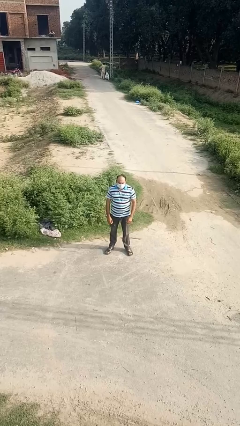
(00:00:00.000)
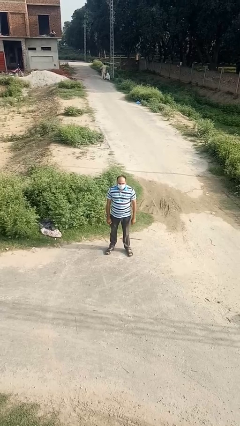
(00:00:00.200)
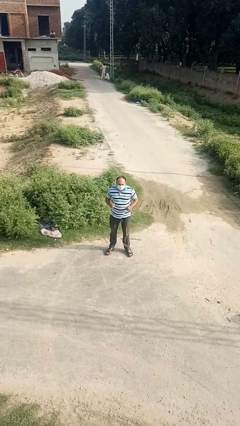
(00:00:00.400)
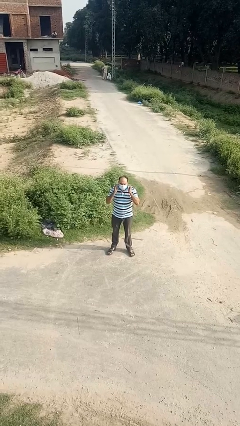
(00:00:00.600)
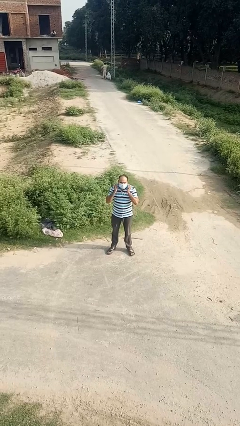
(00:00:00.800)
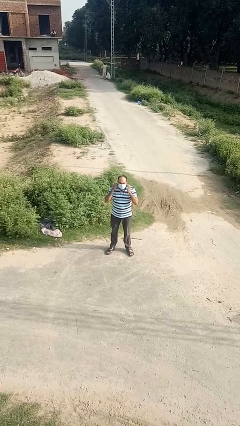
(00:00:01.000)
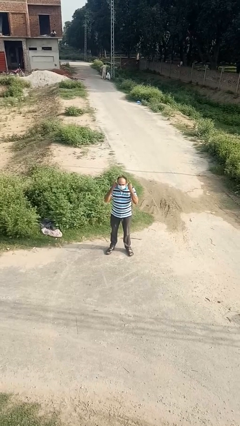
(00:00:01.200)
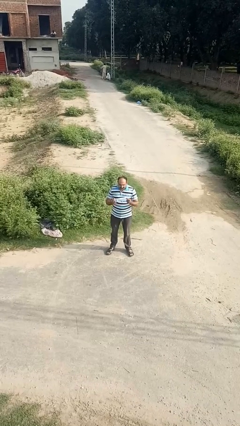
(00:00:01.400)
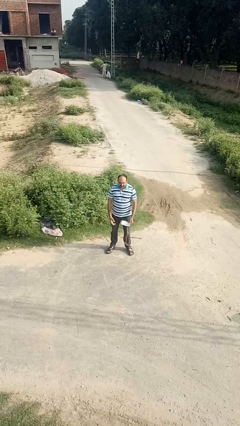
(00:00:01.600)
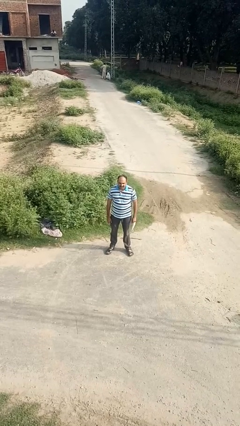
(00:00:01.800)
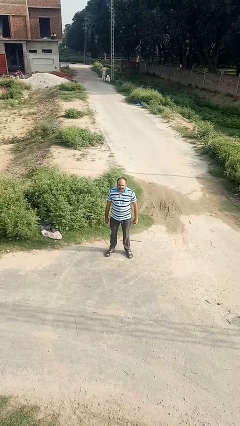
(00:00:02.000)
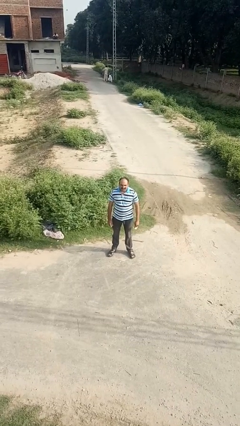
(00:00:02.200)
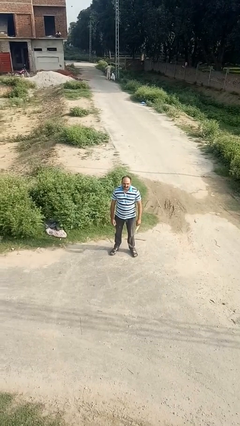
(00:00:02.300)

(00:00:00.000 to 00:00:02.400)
person takes off facemask

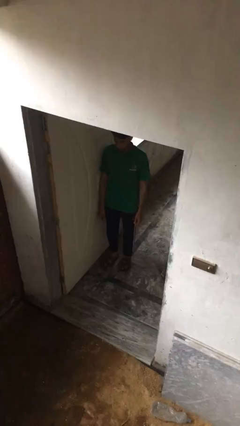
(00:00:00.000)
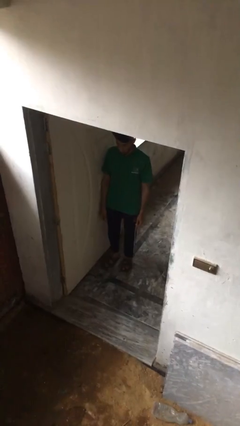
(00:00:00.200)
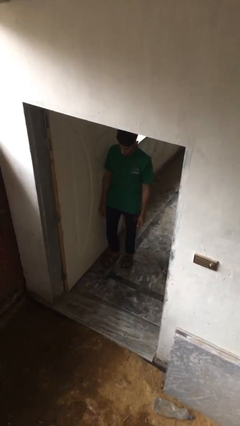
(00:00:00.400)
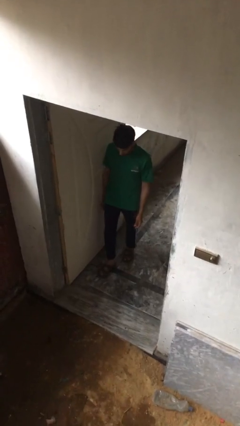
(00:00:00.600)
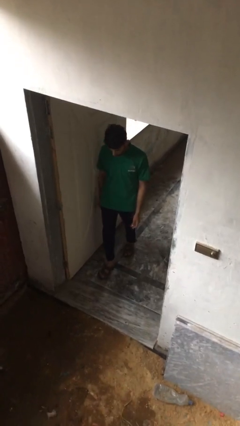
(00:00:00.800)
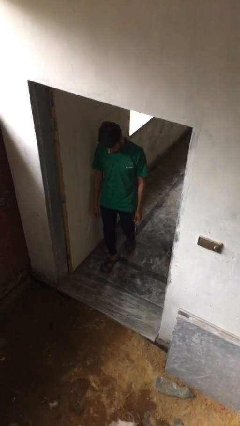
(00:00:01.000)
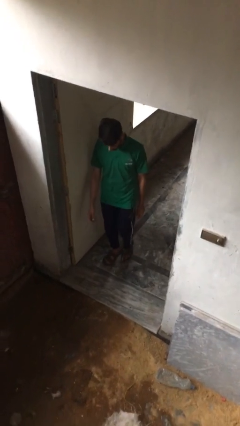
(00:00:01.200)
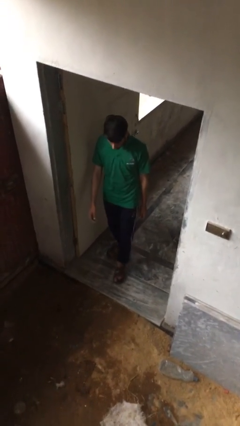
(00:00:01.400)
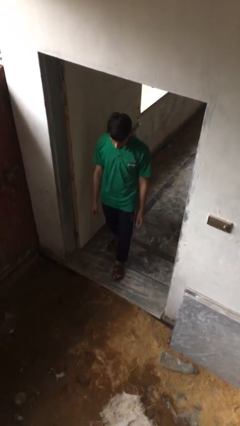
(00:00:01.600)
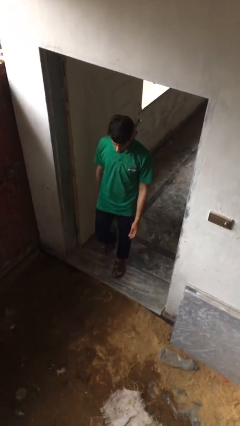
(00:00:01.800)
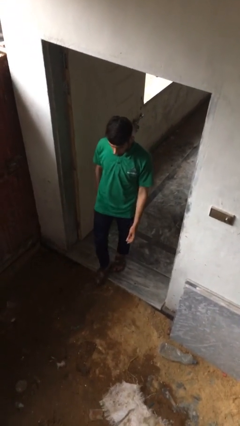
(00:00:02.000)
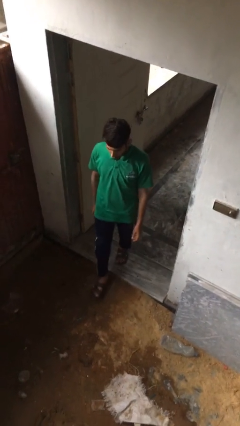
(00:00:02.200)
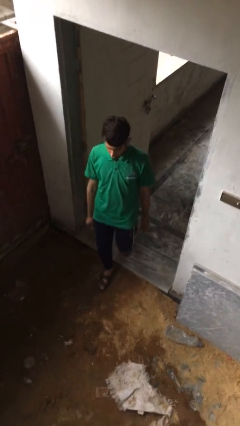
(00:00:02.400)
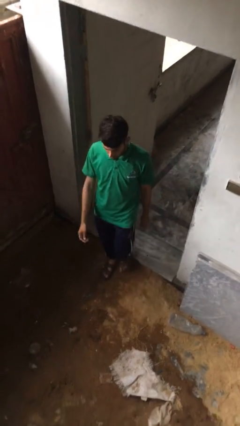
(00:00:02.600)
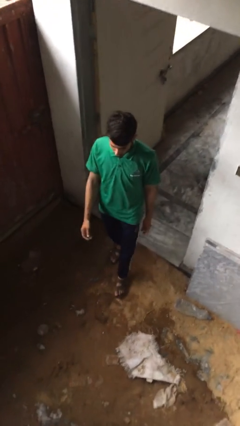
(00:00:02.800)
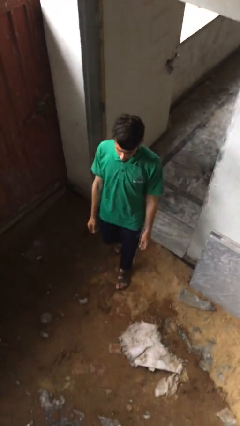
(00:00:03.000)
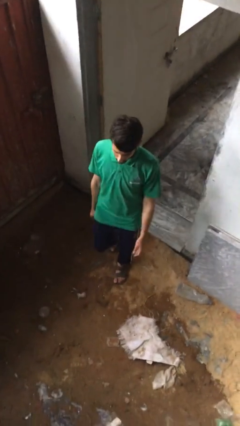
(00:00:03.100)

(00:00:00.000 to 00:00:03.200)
person enters scene through structure

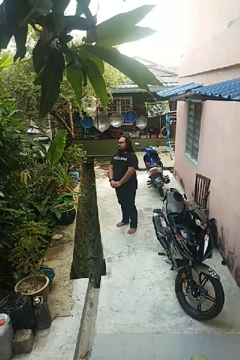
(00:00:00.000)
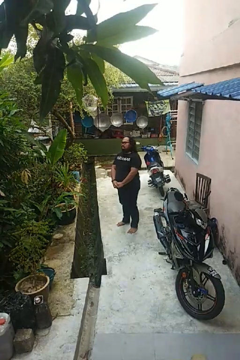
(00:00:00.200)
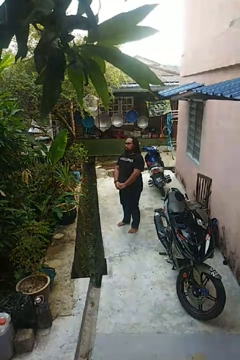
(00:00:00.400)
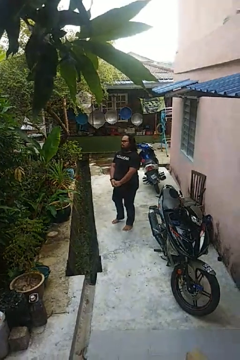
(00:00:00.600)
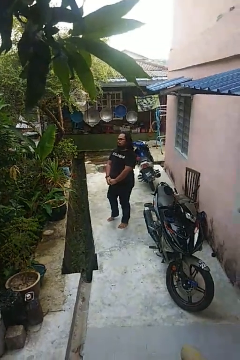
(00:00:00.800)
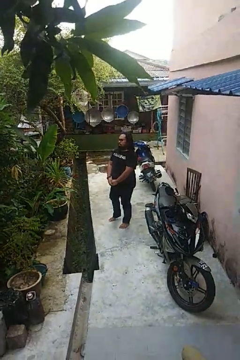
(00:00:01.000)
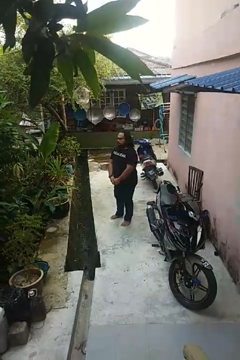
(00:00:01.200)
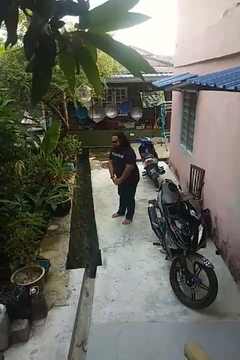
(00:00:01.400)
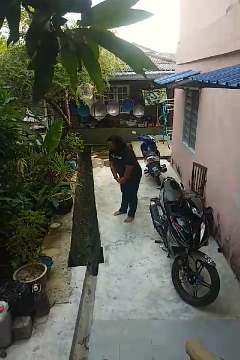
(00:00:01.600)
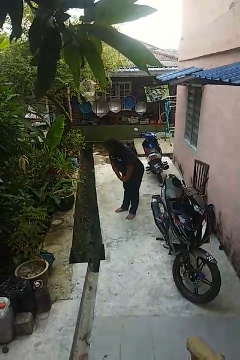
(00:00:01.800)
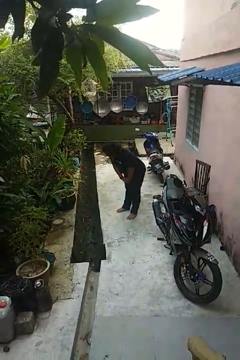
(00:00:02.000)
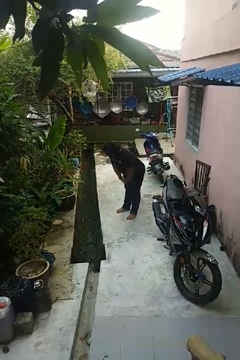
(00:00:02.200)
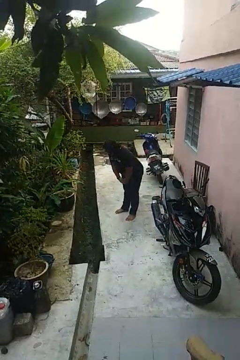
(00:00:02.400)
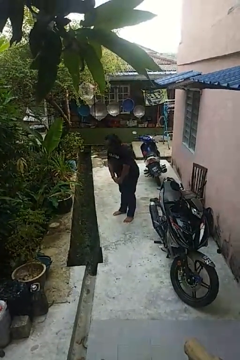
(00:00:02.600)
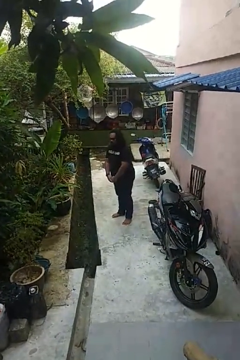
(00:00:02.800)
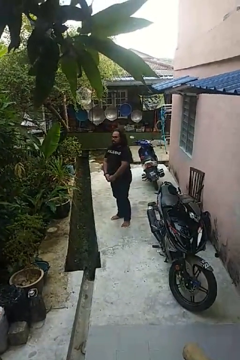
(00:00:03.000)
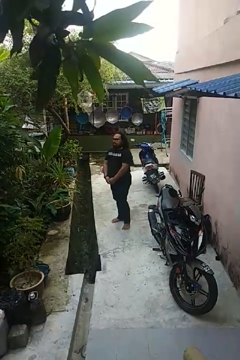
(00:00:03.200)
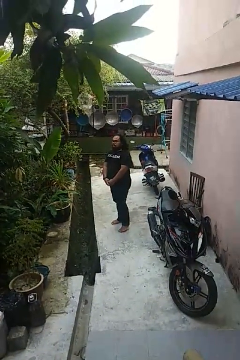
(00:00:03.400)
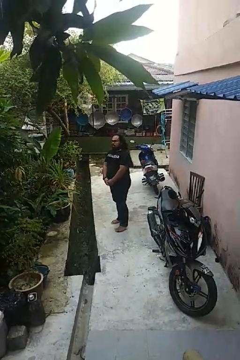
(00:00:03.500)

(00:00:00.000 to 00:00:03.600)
person bows

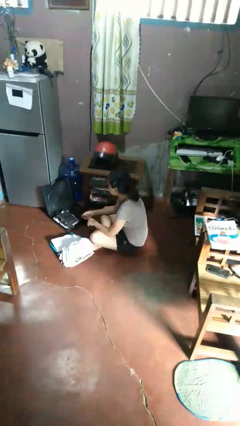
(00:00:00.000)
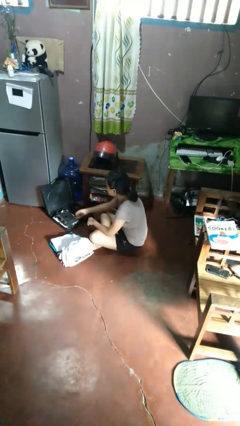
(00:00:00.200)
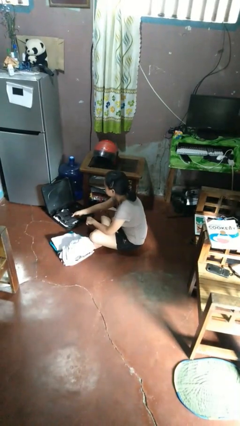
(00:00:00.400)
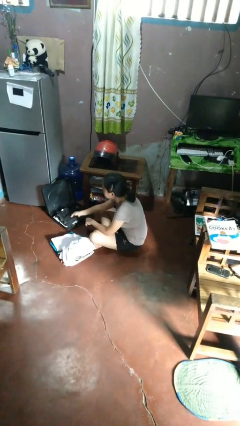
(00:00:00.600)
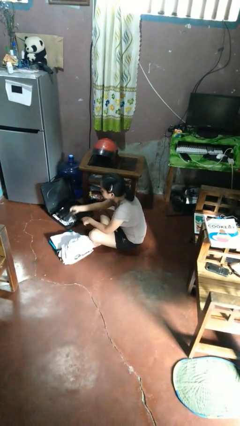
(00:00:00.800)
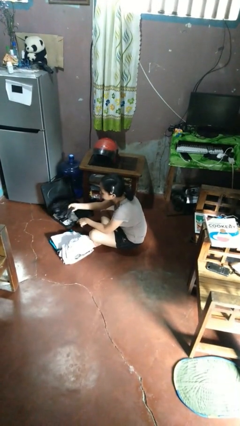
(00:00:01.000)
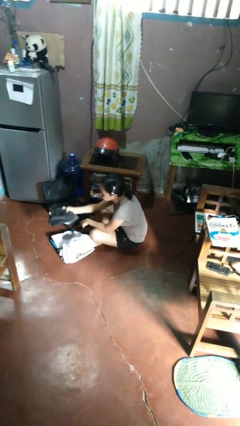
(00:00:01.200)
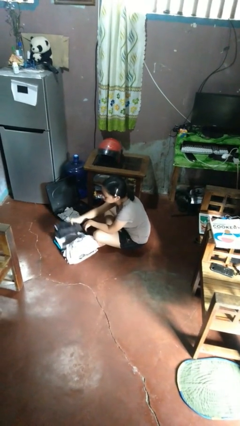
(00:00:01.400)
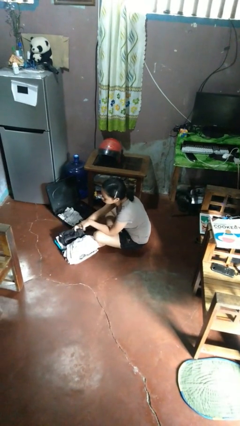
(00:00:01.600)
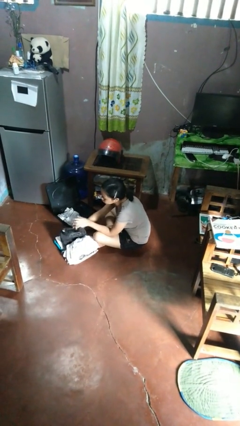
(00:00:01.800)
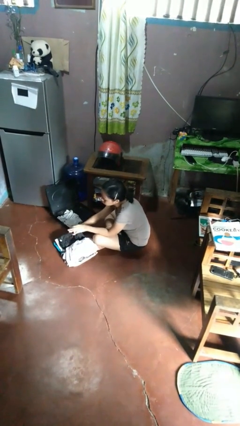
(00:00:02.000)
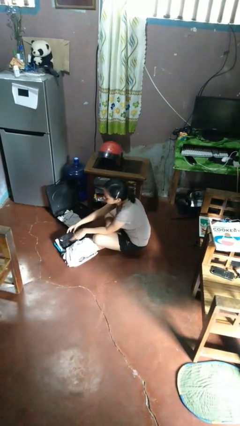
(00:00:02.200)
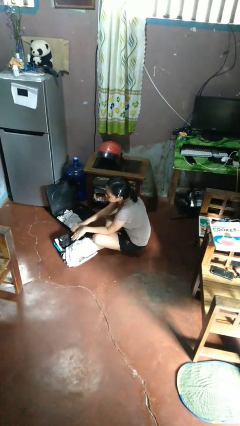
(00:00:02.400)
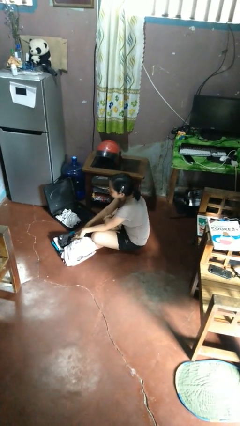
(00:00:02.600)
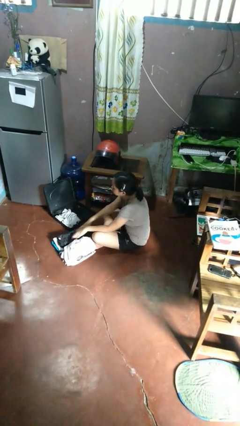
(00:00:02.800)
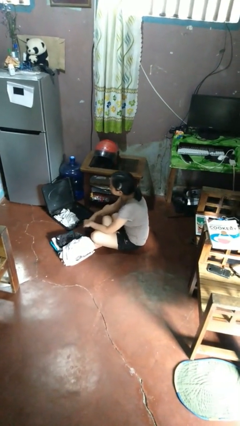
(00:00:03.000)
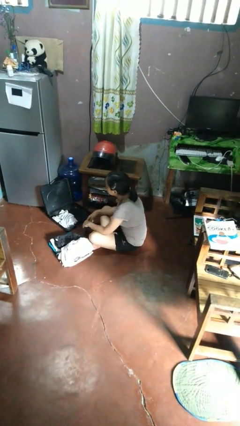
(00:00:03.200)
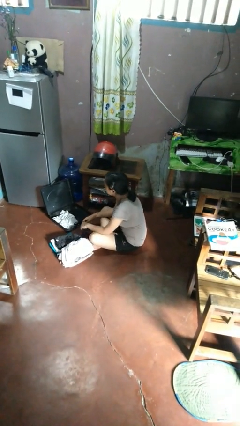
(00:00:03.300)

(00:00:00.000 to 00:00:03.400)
person unloads clothes from suitcase

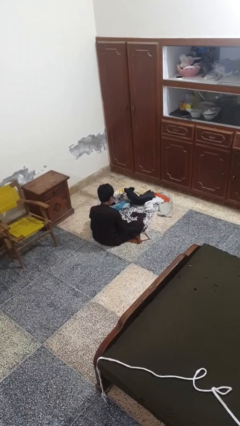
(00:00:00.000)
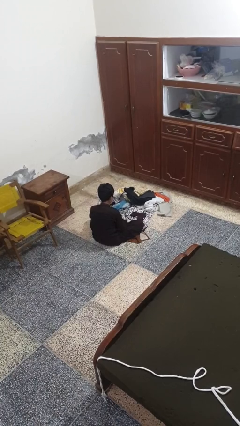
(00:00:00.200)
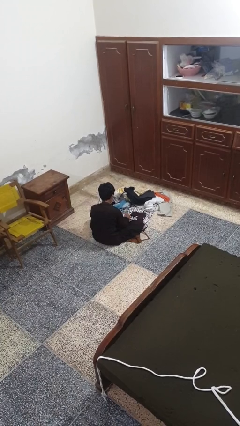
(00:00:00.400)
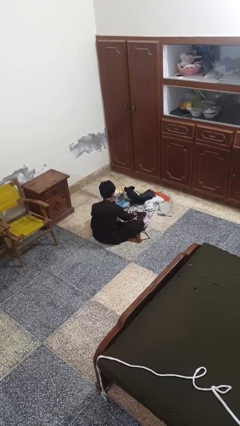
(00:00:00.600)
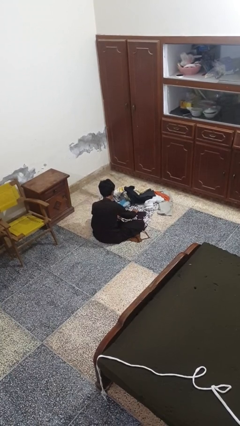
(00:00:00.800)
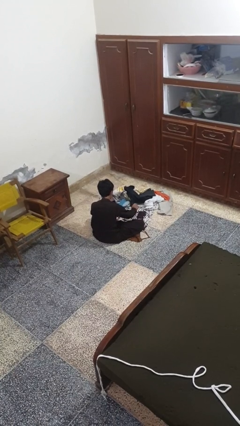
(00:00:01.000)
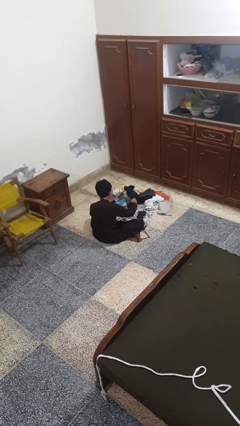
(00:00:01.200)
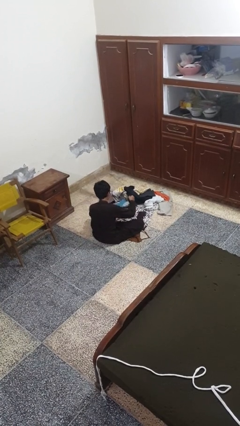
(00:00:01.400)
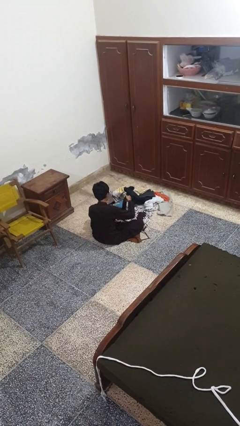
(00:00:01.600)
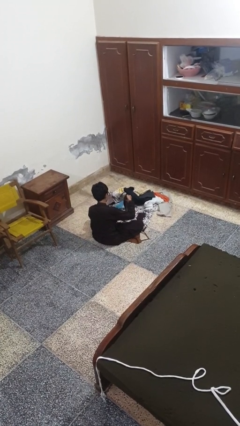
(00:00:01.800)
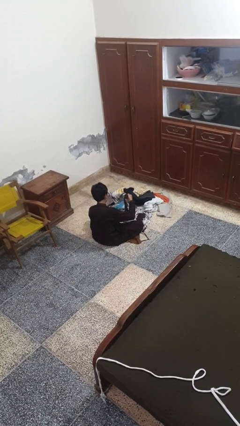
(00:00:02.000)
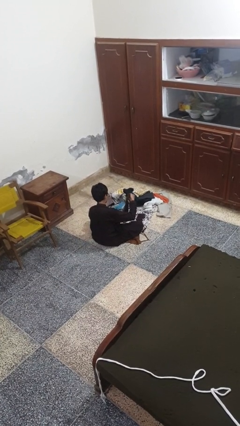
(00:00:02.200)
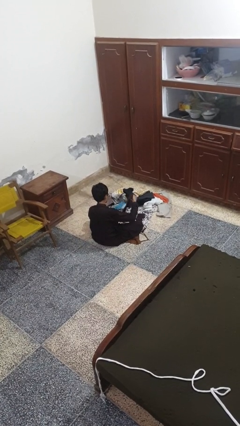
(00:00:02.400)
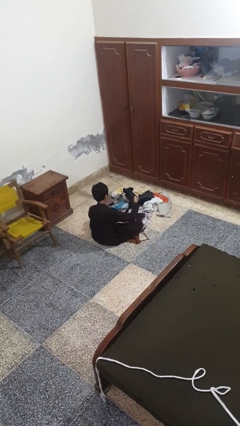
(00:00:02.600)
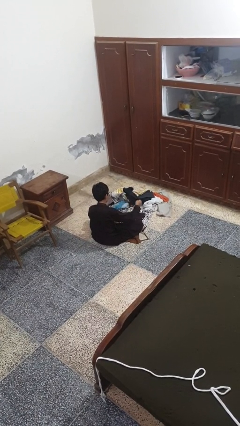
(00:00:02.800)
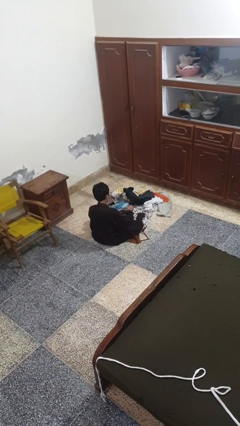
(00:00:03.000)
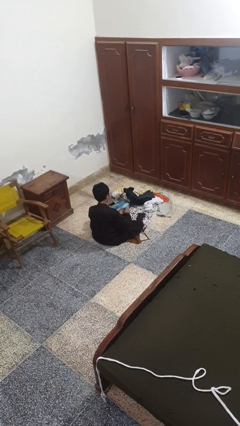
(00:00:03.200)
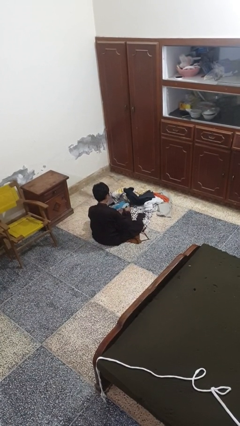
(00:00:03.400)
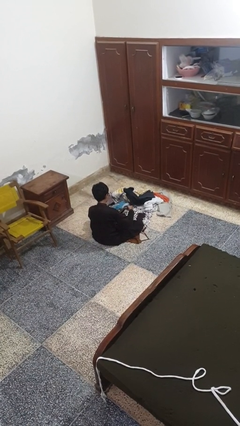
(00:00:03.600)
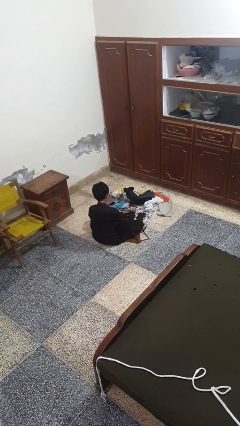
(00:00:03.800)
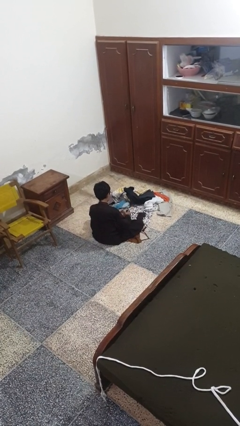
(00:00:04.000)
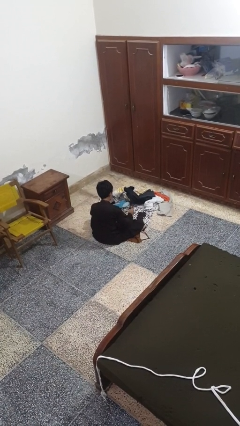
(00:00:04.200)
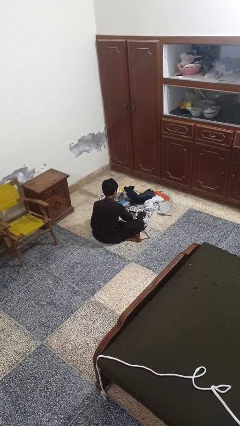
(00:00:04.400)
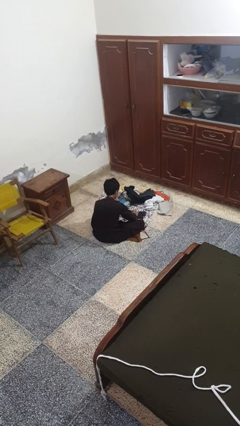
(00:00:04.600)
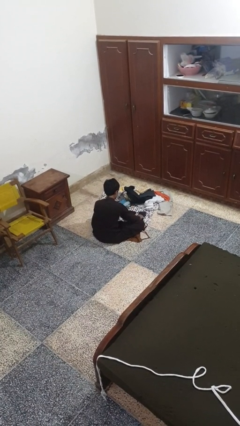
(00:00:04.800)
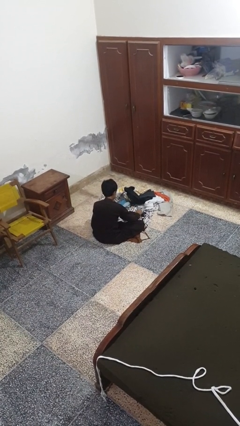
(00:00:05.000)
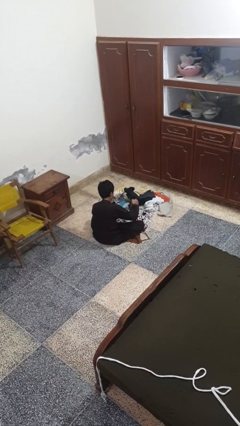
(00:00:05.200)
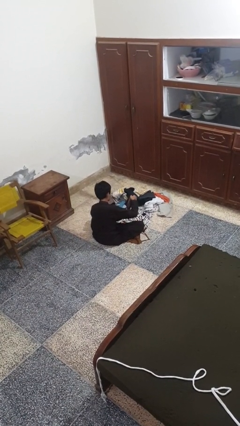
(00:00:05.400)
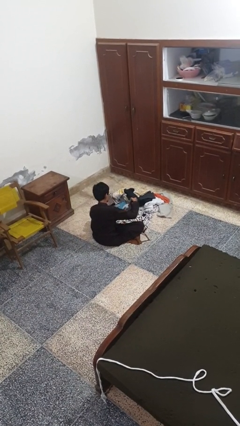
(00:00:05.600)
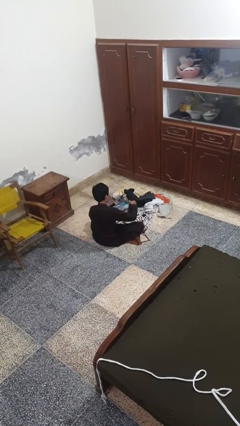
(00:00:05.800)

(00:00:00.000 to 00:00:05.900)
person folds socks
